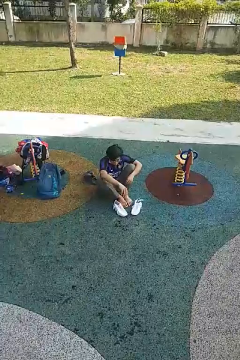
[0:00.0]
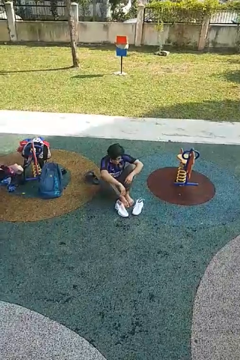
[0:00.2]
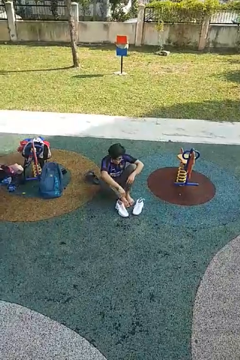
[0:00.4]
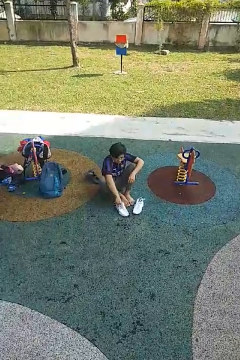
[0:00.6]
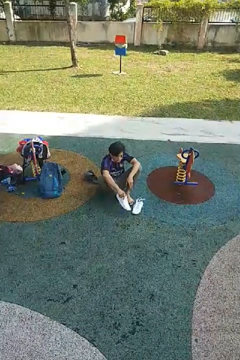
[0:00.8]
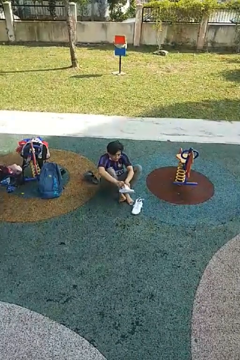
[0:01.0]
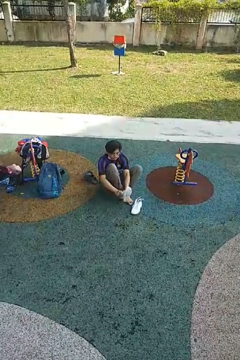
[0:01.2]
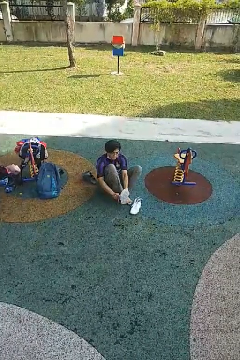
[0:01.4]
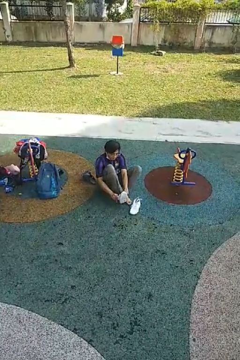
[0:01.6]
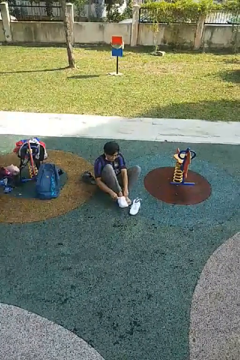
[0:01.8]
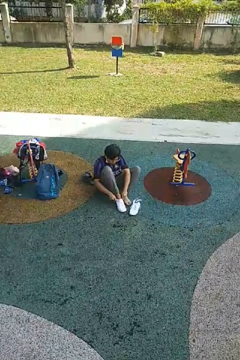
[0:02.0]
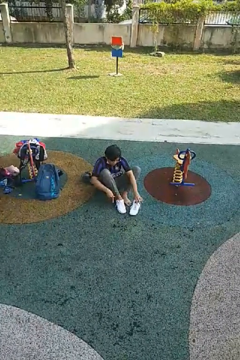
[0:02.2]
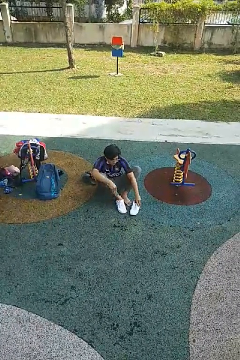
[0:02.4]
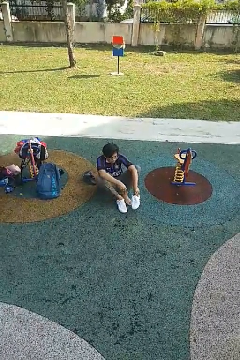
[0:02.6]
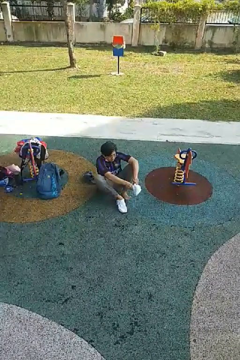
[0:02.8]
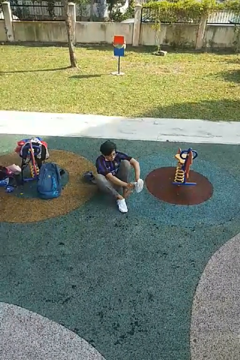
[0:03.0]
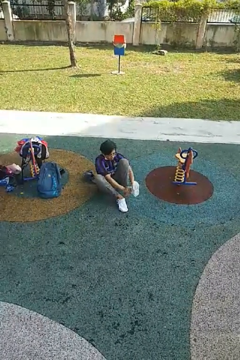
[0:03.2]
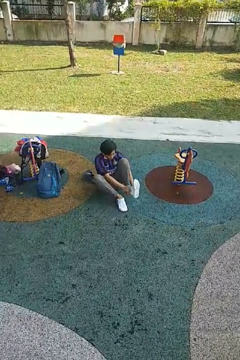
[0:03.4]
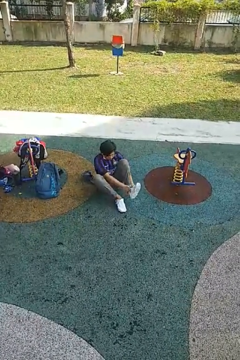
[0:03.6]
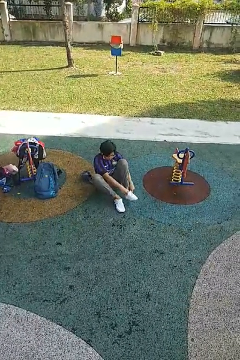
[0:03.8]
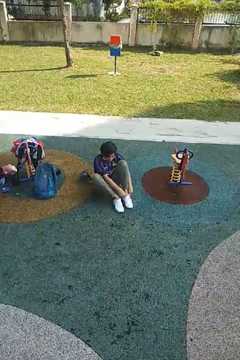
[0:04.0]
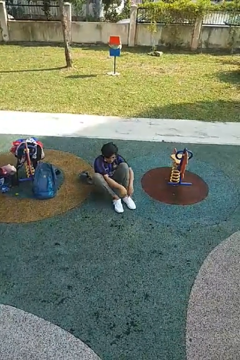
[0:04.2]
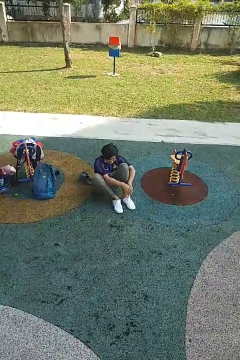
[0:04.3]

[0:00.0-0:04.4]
person puts on shoes

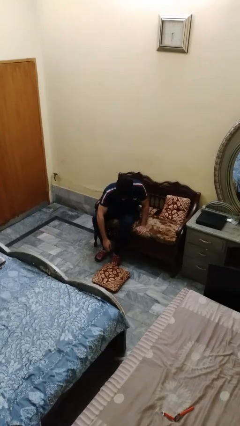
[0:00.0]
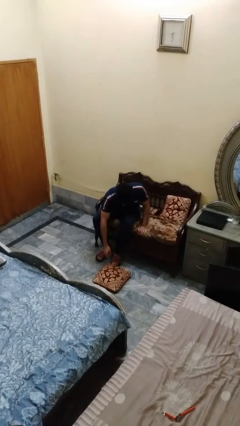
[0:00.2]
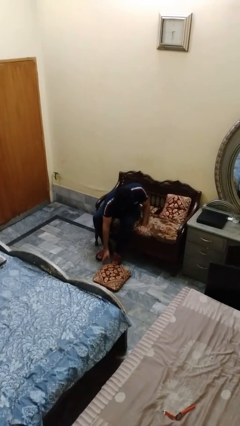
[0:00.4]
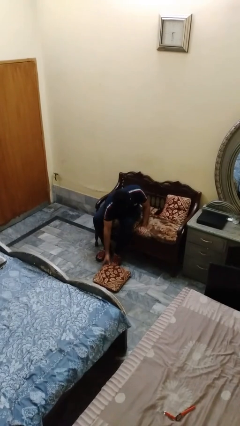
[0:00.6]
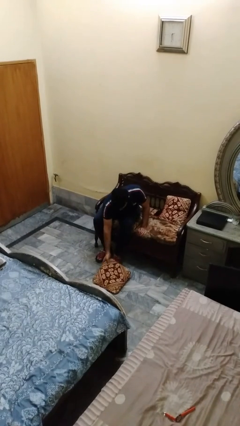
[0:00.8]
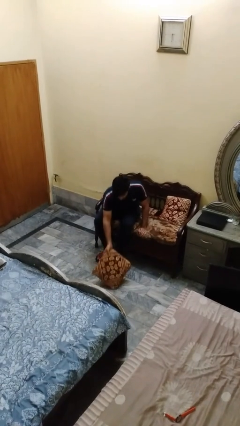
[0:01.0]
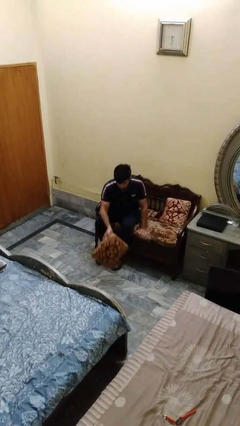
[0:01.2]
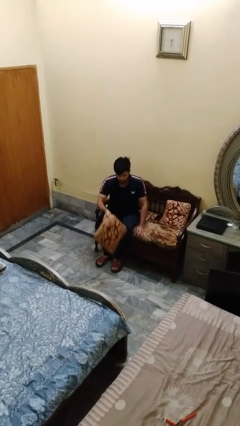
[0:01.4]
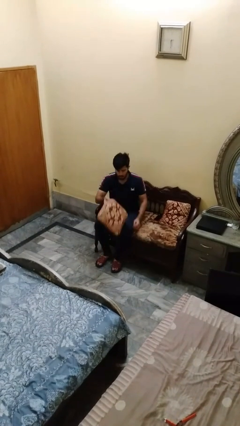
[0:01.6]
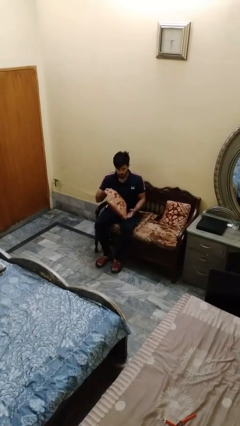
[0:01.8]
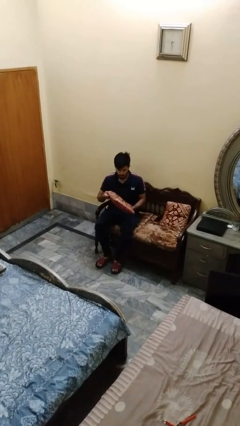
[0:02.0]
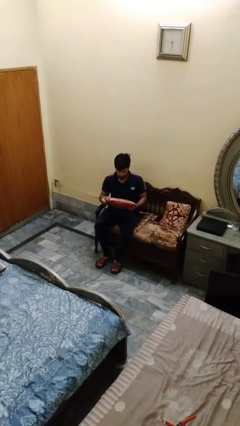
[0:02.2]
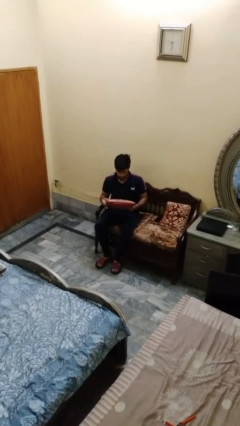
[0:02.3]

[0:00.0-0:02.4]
person picks up object from floor

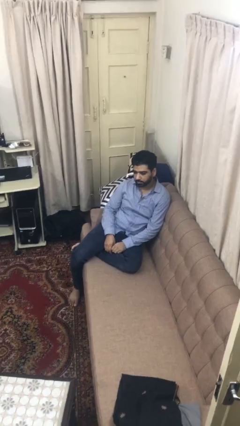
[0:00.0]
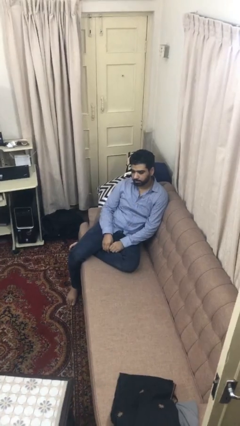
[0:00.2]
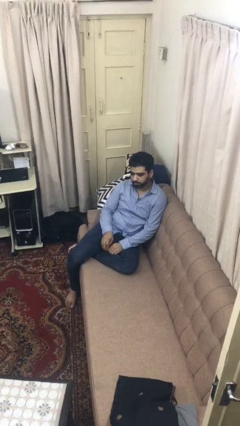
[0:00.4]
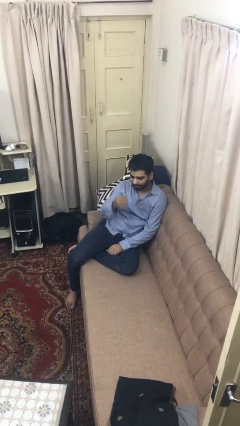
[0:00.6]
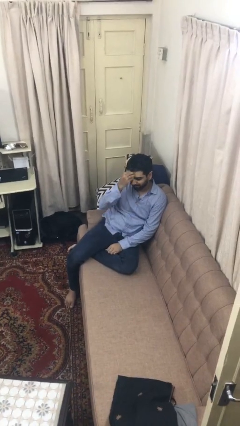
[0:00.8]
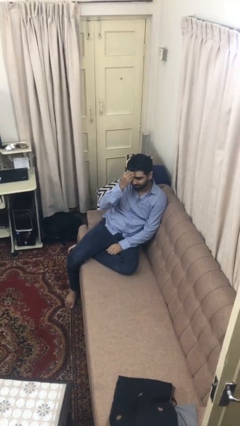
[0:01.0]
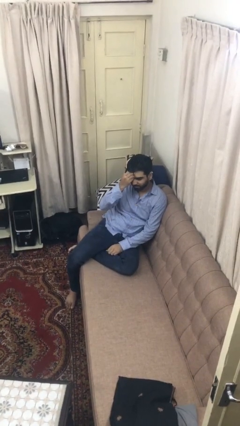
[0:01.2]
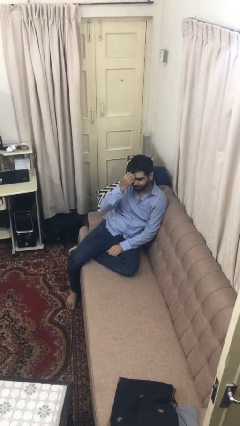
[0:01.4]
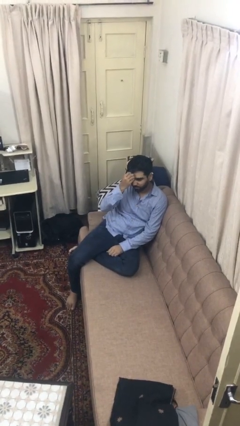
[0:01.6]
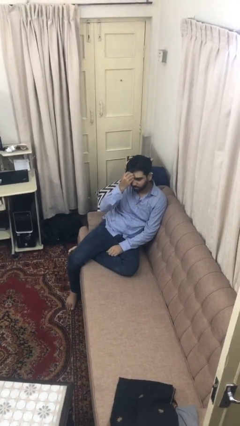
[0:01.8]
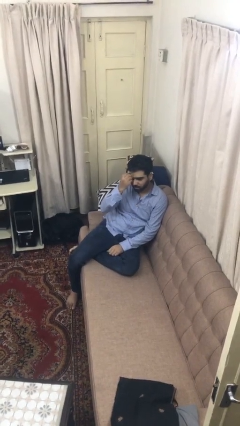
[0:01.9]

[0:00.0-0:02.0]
person scratches face

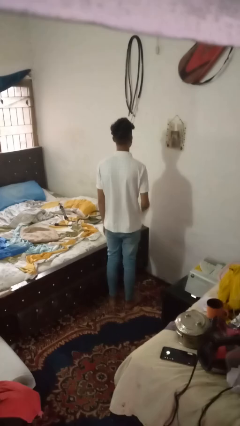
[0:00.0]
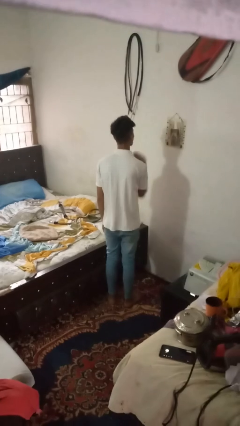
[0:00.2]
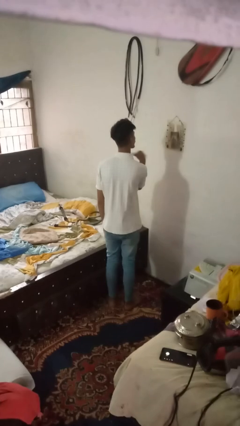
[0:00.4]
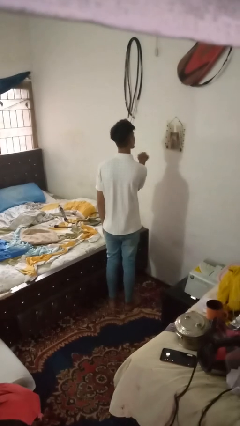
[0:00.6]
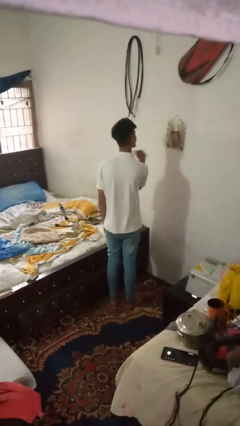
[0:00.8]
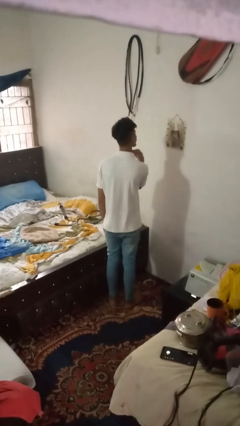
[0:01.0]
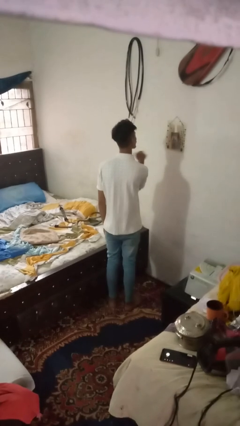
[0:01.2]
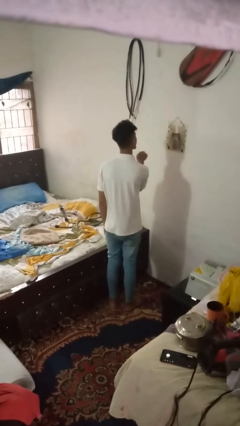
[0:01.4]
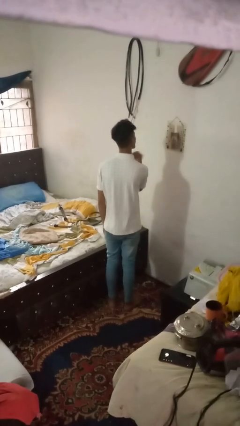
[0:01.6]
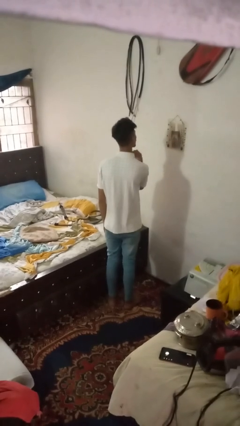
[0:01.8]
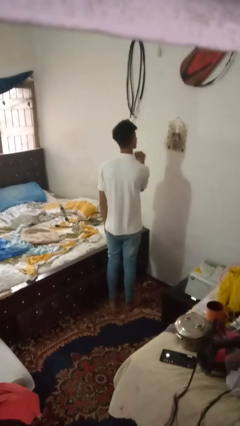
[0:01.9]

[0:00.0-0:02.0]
person gestures cut

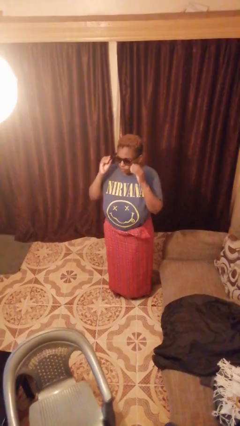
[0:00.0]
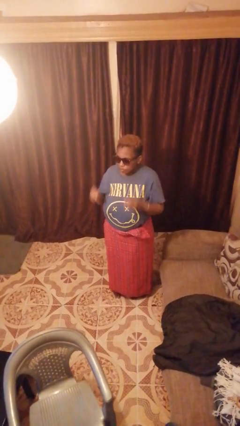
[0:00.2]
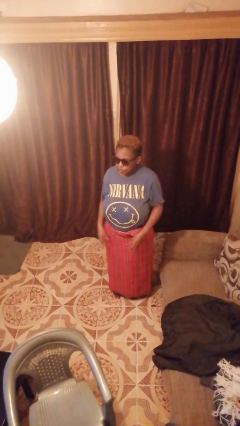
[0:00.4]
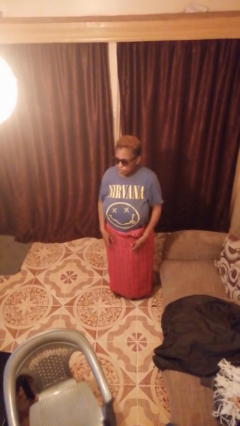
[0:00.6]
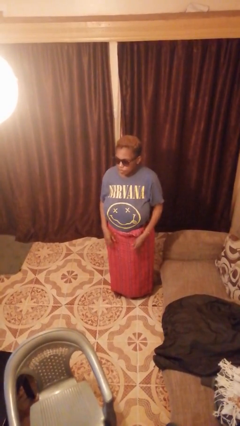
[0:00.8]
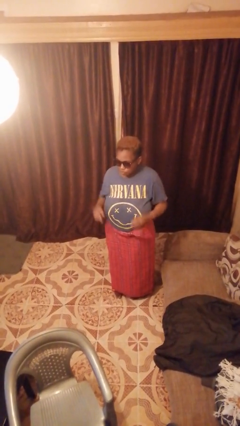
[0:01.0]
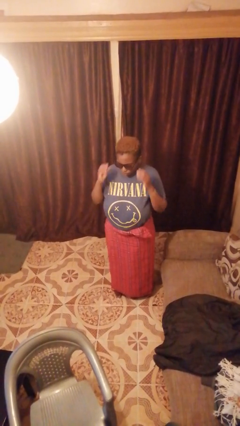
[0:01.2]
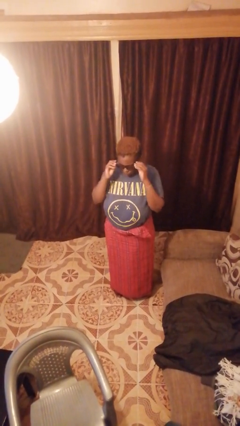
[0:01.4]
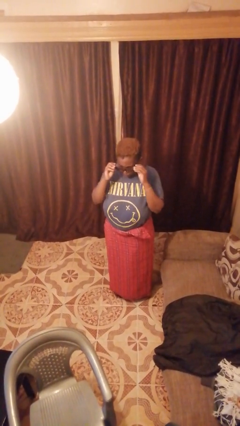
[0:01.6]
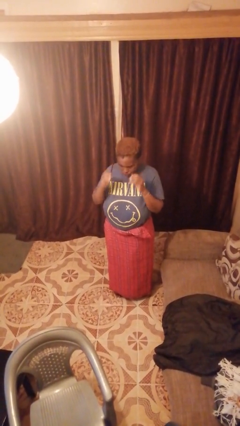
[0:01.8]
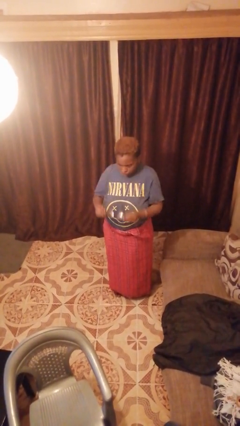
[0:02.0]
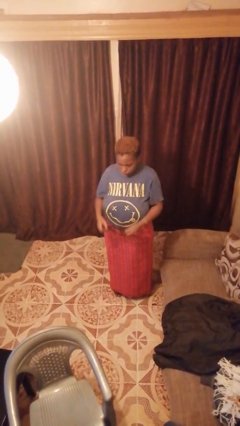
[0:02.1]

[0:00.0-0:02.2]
person takes off sunglasses

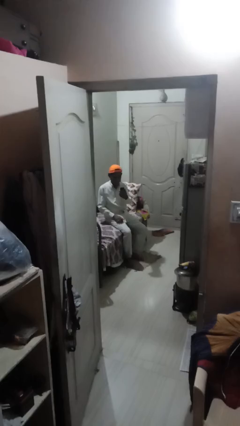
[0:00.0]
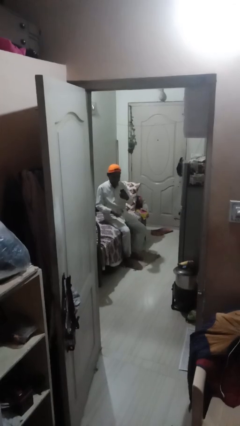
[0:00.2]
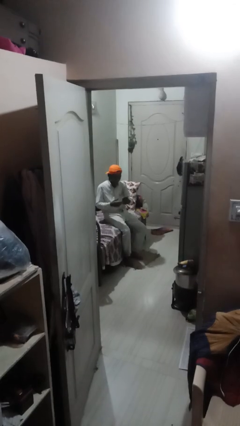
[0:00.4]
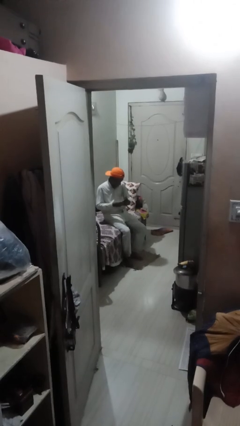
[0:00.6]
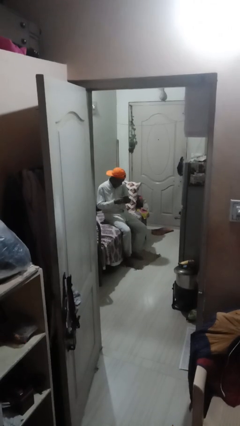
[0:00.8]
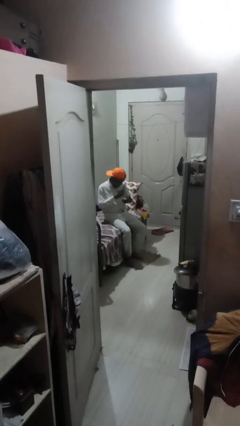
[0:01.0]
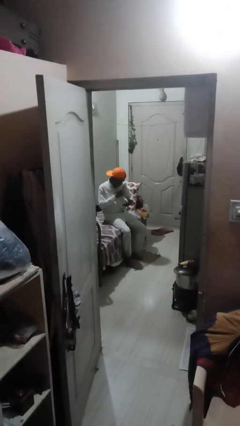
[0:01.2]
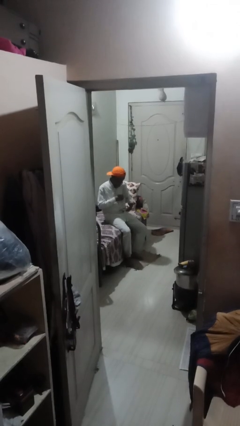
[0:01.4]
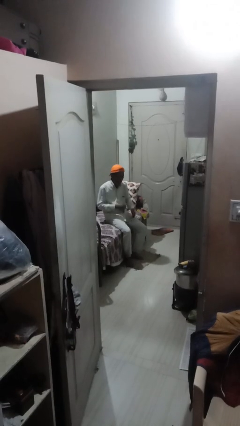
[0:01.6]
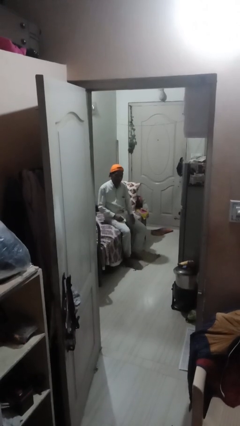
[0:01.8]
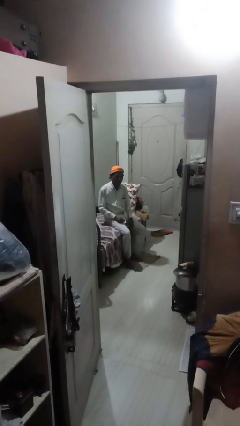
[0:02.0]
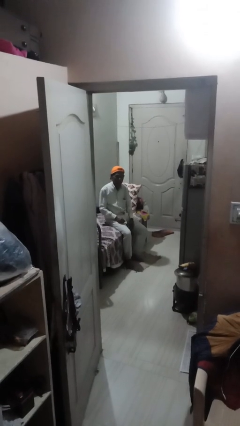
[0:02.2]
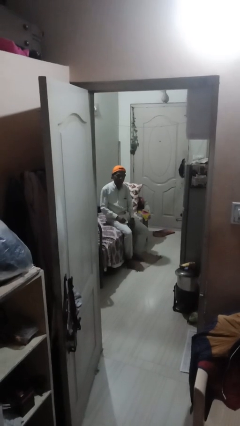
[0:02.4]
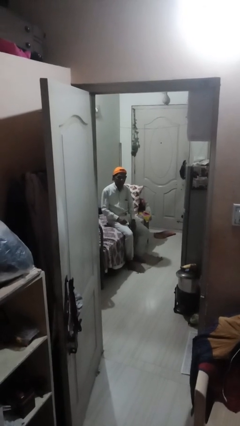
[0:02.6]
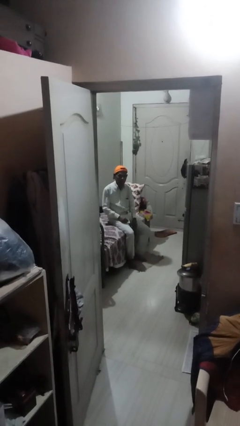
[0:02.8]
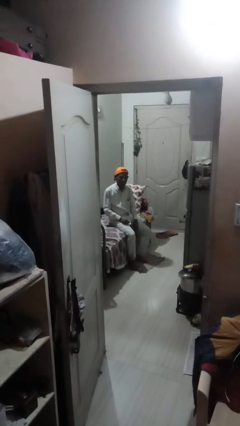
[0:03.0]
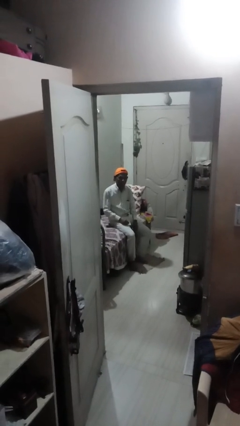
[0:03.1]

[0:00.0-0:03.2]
person puts phone into pocket

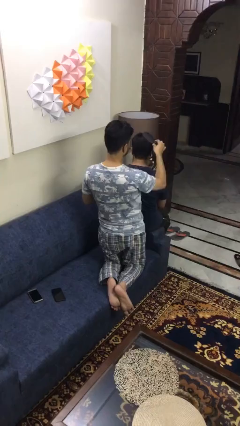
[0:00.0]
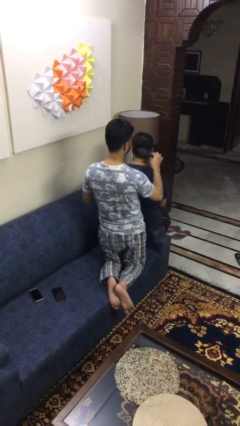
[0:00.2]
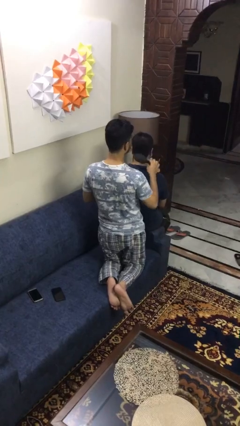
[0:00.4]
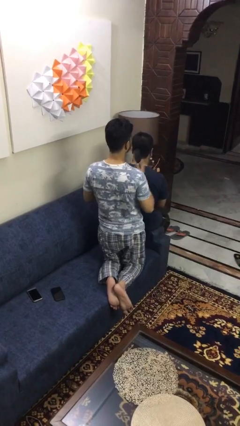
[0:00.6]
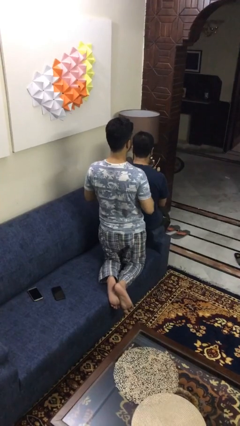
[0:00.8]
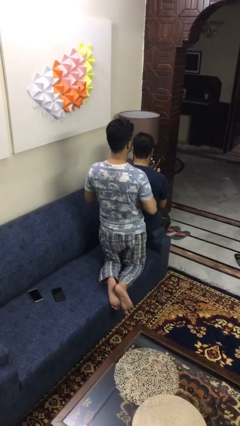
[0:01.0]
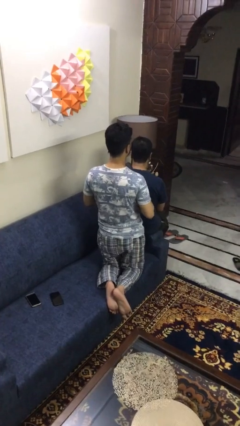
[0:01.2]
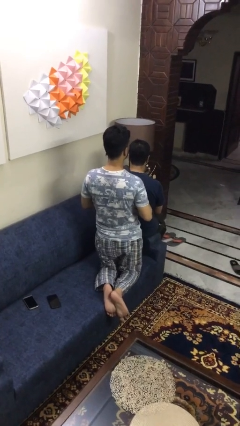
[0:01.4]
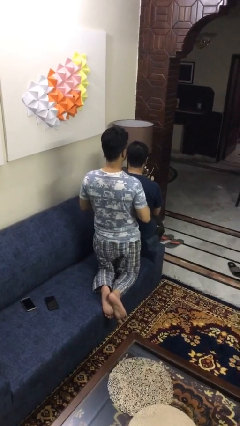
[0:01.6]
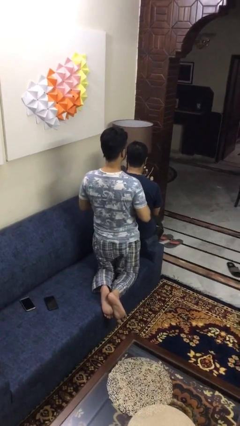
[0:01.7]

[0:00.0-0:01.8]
person brushes hair of person
